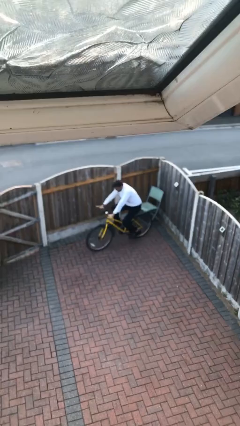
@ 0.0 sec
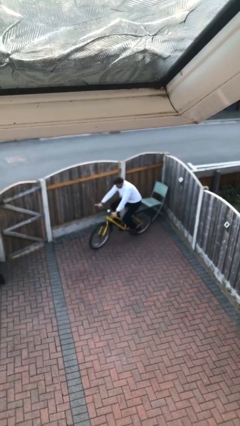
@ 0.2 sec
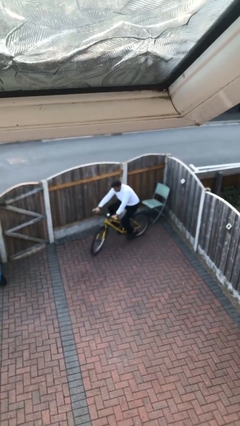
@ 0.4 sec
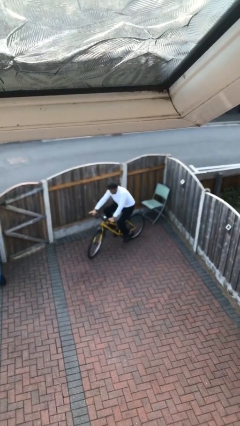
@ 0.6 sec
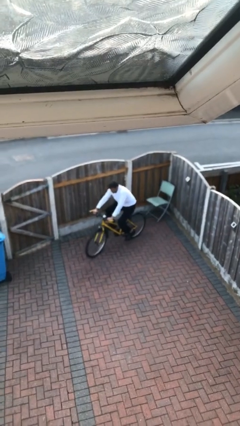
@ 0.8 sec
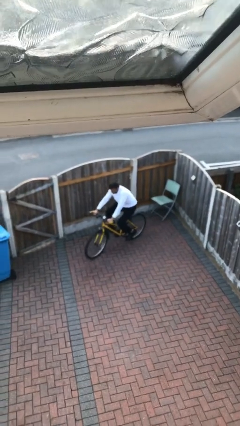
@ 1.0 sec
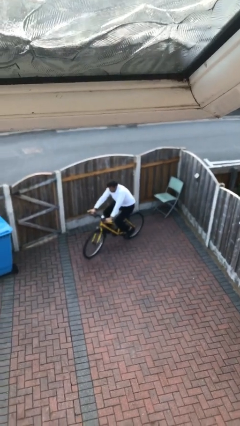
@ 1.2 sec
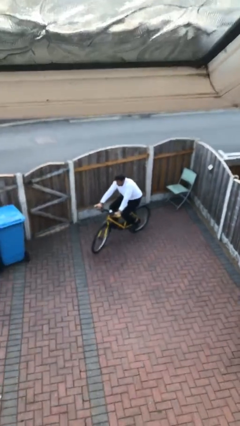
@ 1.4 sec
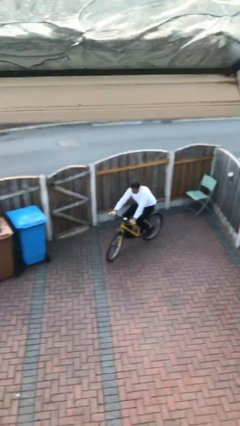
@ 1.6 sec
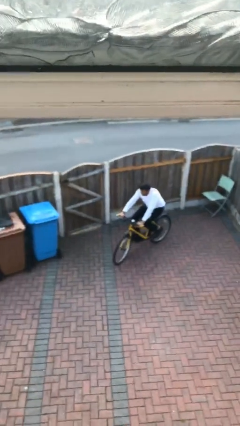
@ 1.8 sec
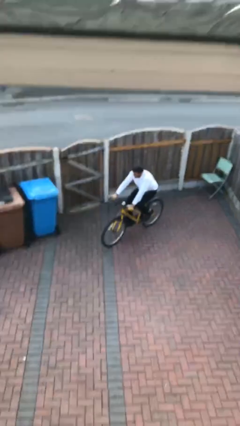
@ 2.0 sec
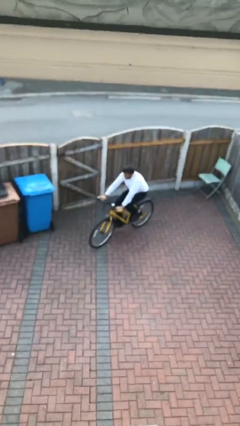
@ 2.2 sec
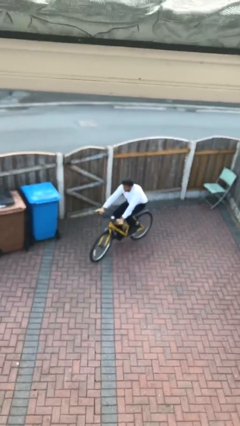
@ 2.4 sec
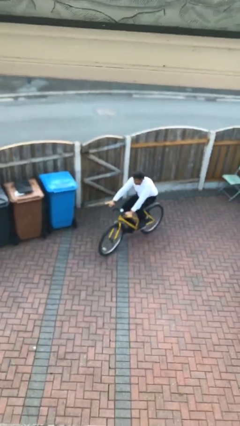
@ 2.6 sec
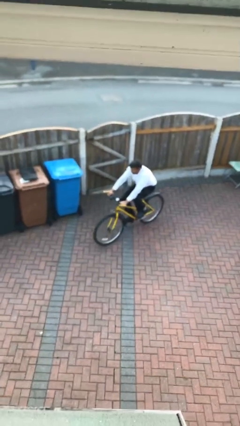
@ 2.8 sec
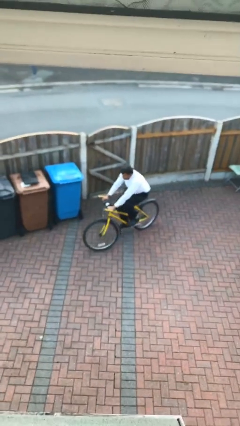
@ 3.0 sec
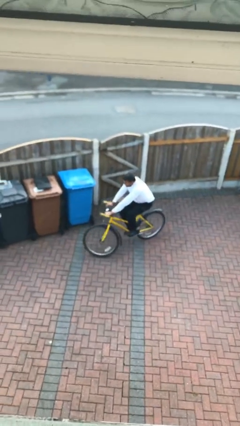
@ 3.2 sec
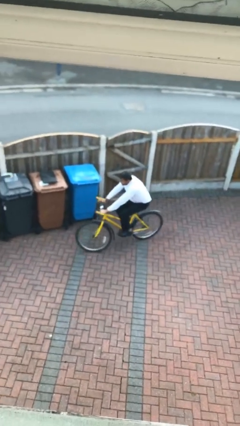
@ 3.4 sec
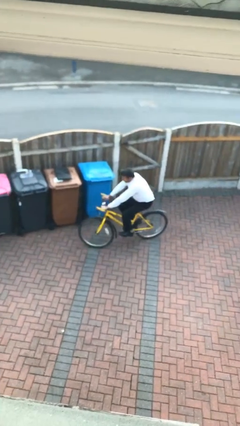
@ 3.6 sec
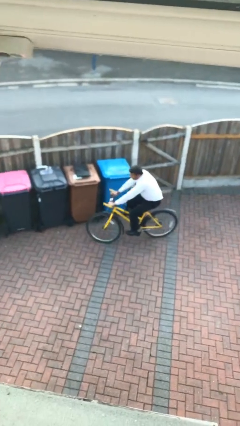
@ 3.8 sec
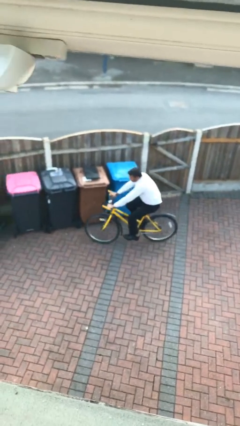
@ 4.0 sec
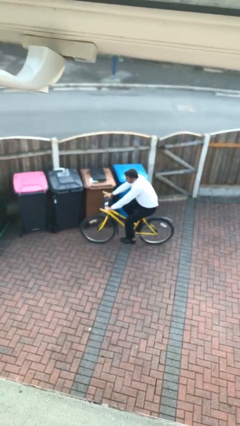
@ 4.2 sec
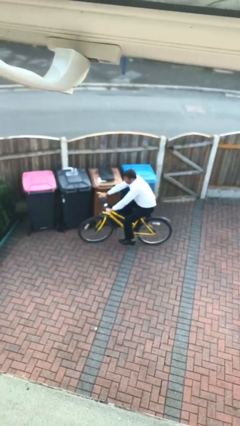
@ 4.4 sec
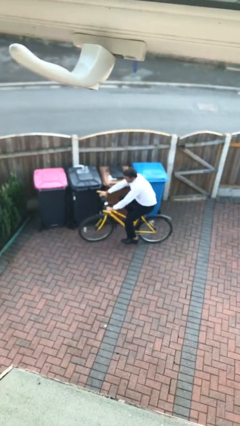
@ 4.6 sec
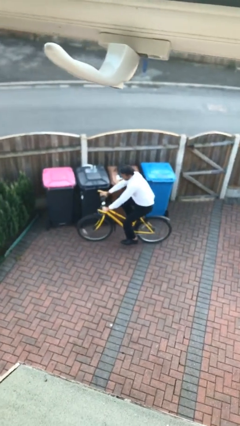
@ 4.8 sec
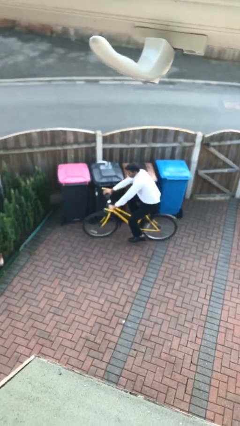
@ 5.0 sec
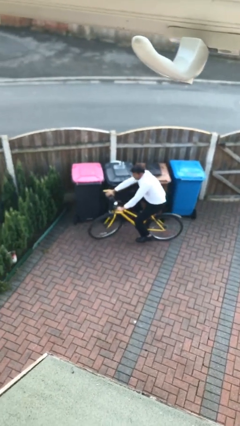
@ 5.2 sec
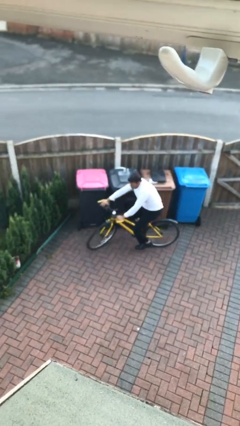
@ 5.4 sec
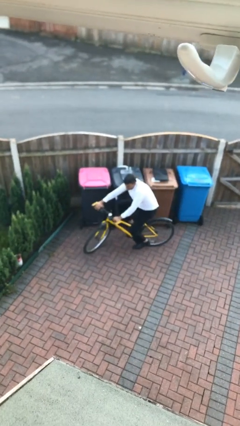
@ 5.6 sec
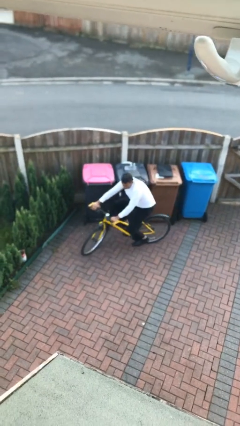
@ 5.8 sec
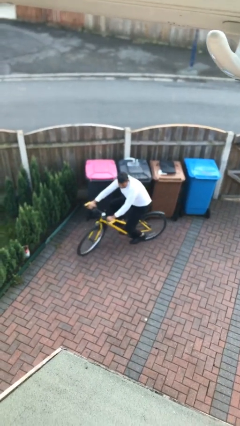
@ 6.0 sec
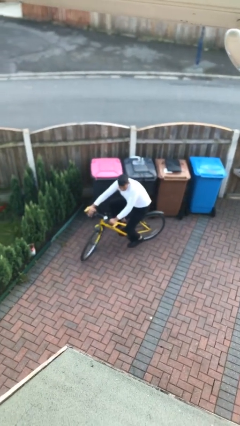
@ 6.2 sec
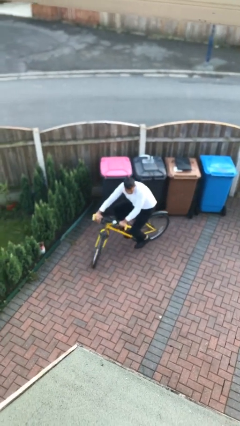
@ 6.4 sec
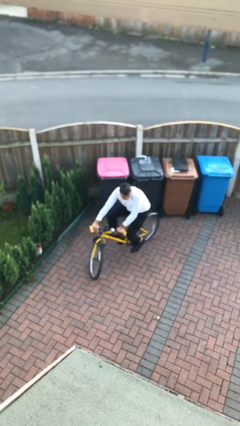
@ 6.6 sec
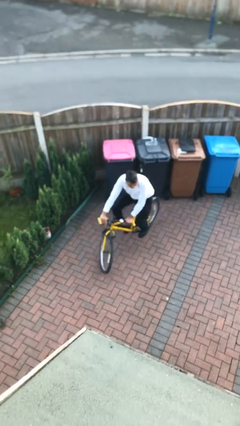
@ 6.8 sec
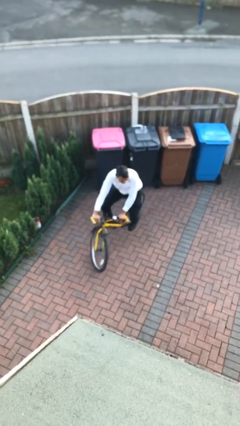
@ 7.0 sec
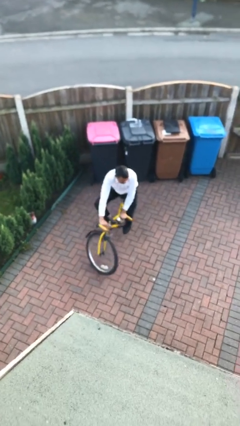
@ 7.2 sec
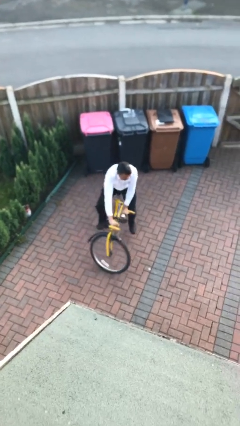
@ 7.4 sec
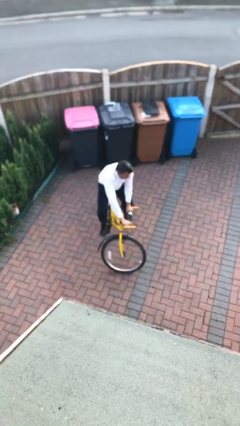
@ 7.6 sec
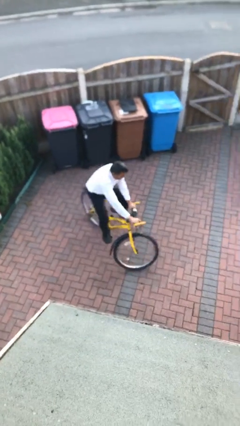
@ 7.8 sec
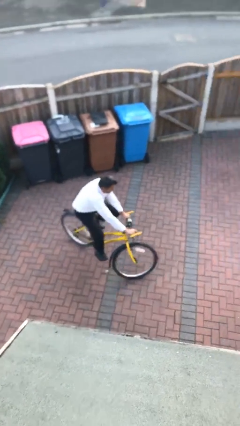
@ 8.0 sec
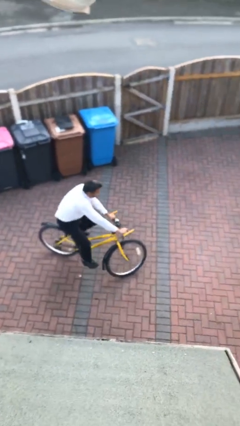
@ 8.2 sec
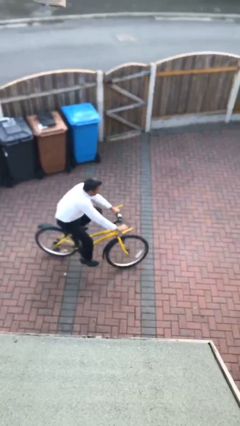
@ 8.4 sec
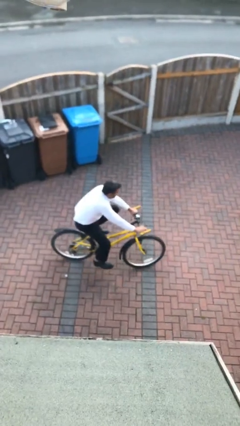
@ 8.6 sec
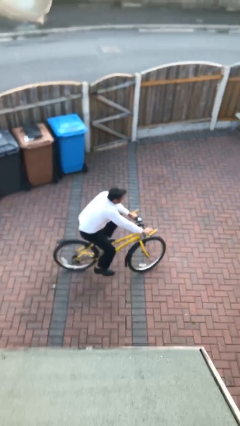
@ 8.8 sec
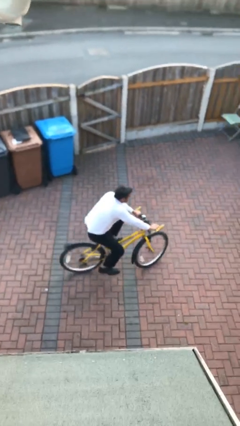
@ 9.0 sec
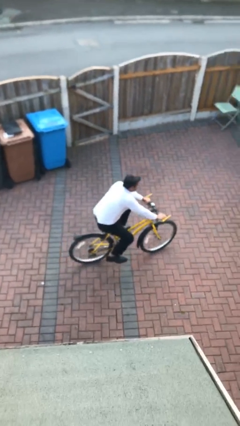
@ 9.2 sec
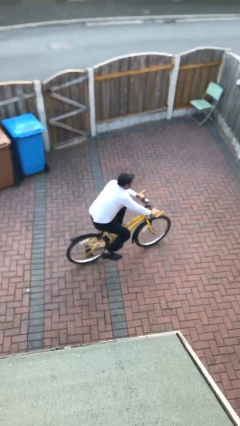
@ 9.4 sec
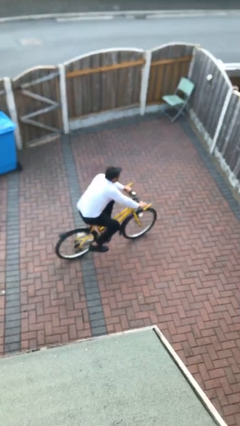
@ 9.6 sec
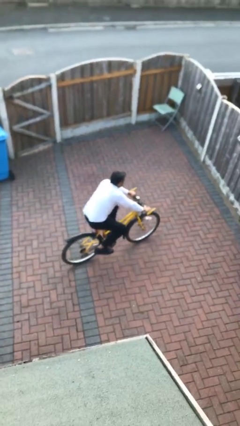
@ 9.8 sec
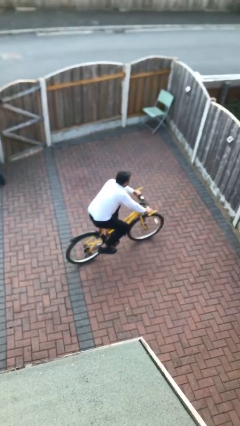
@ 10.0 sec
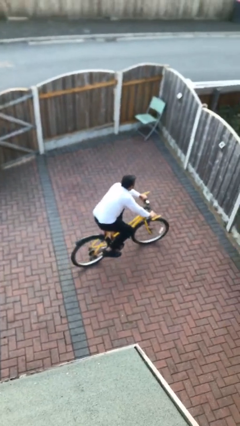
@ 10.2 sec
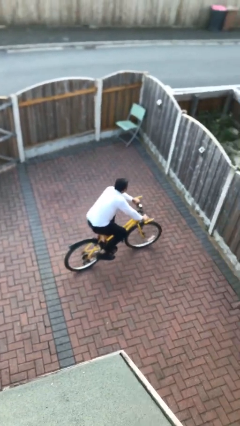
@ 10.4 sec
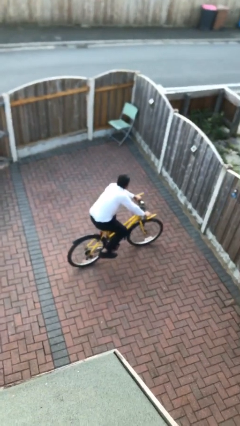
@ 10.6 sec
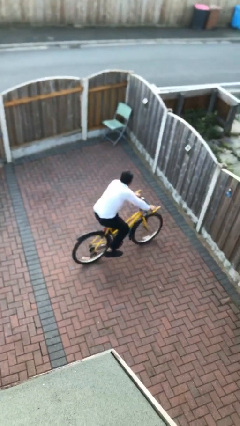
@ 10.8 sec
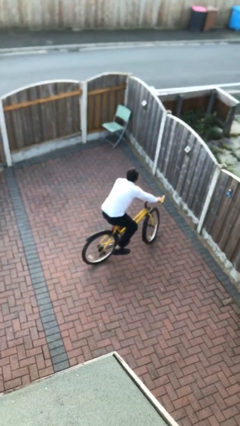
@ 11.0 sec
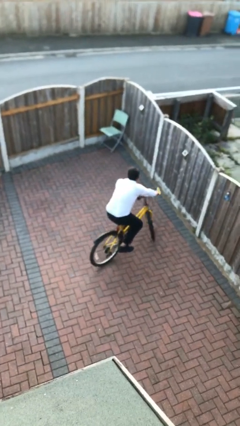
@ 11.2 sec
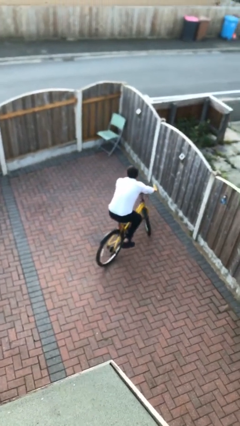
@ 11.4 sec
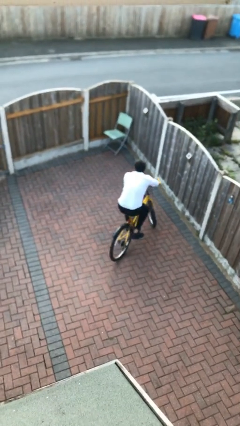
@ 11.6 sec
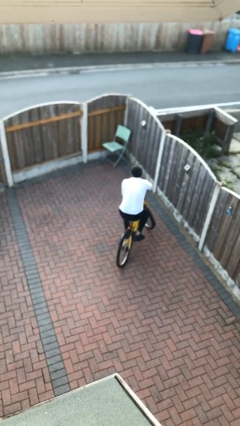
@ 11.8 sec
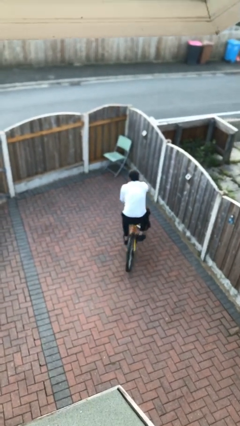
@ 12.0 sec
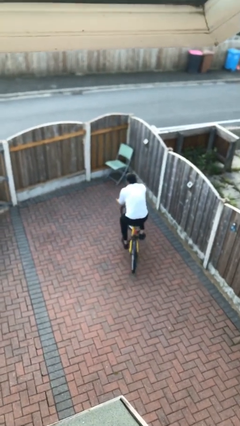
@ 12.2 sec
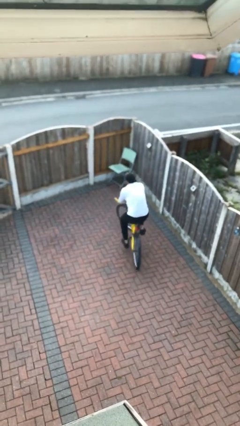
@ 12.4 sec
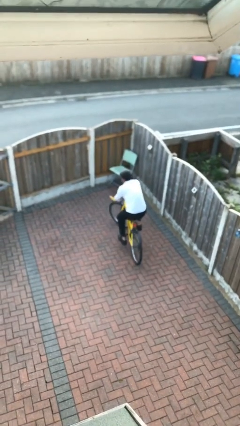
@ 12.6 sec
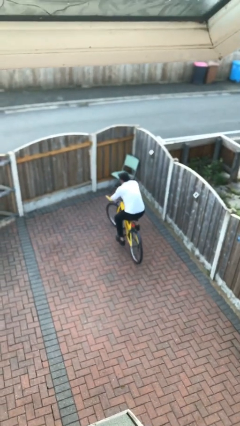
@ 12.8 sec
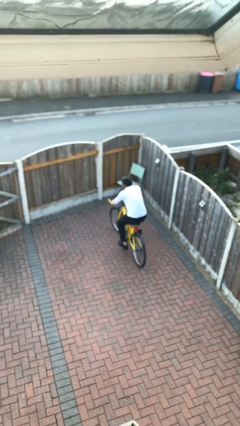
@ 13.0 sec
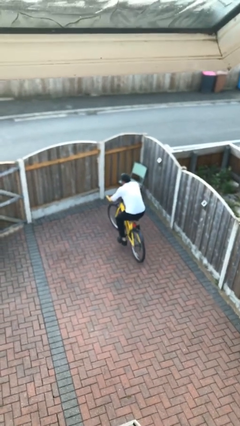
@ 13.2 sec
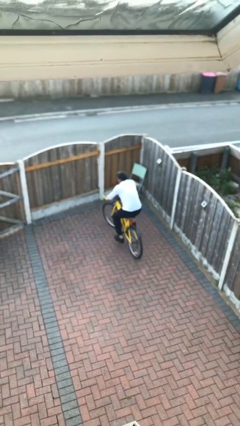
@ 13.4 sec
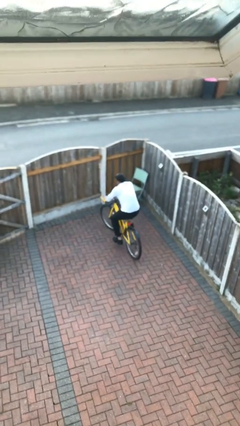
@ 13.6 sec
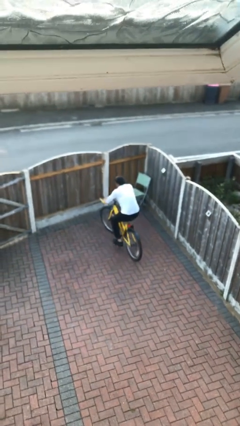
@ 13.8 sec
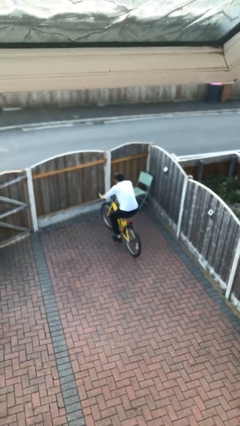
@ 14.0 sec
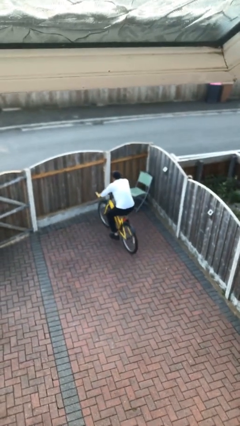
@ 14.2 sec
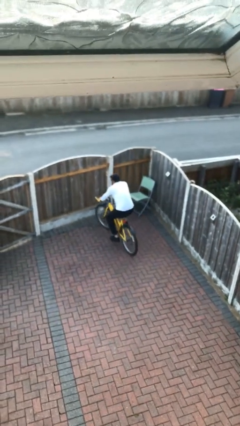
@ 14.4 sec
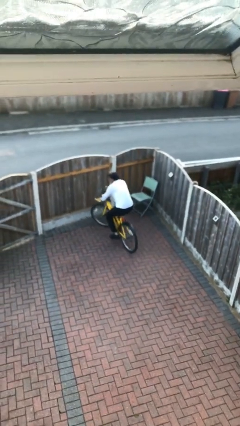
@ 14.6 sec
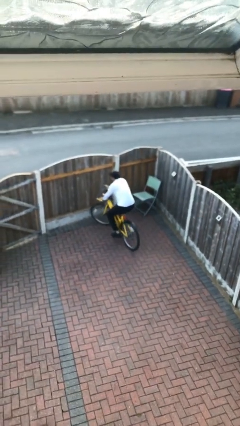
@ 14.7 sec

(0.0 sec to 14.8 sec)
person rides bicycle

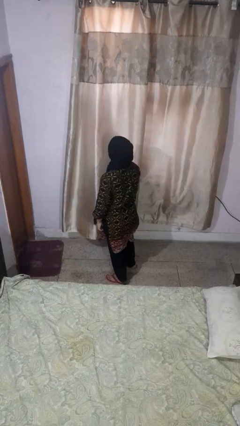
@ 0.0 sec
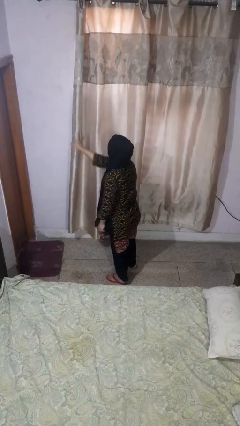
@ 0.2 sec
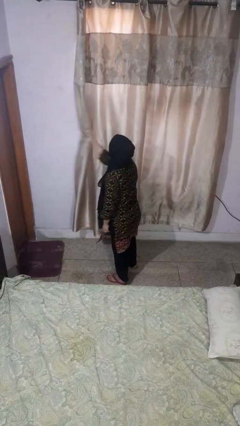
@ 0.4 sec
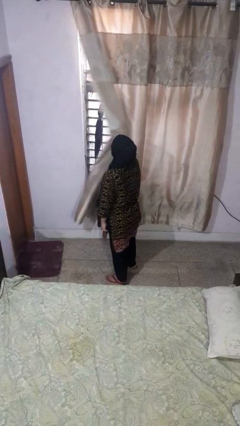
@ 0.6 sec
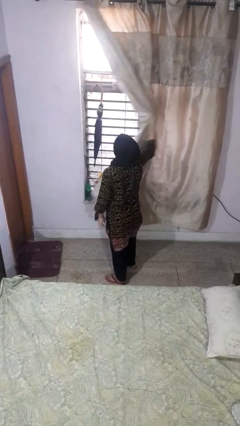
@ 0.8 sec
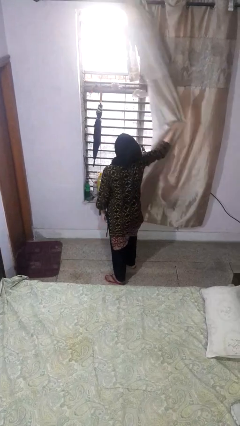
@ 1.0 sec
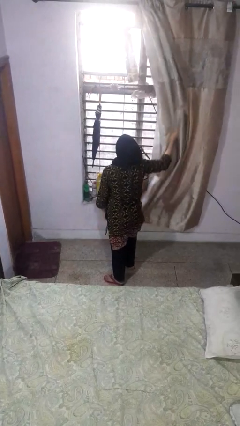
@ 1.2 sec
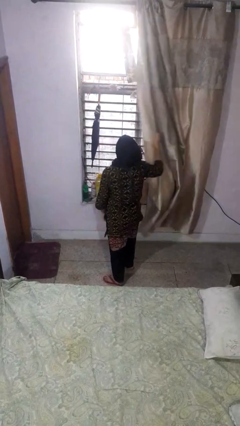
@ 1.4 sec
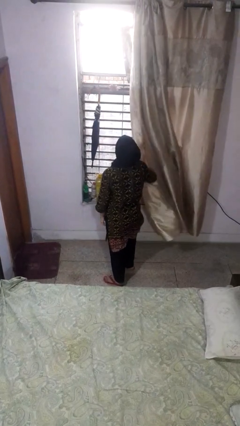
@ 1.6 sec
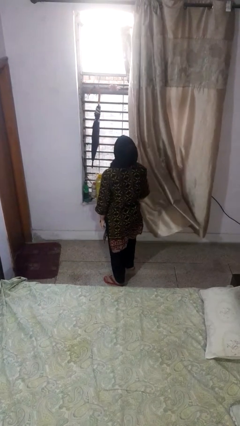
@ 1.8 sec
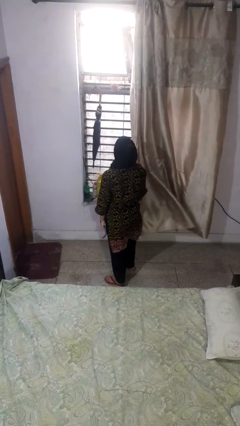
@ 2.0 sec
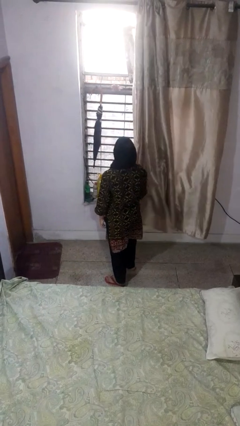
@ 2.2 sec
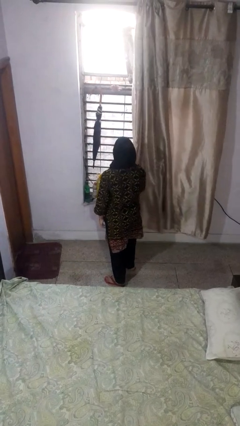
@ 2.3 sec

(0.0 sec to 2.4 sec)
person opens curtains

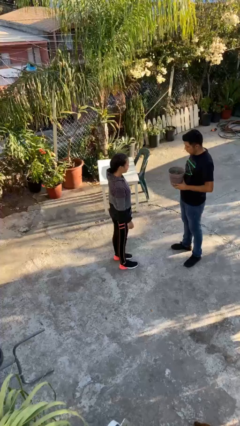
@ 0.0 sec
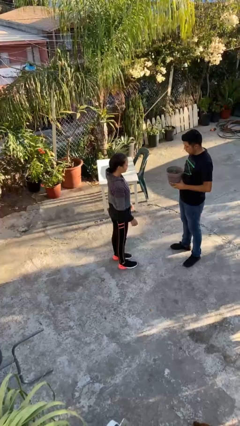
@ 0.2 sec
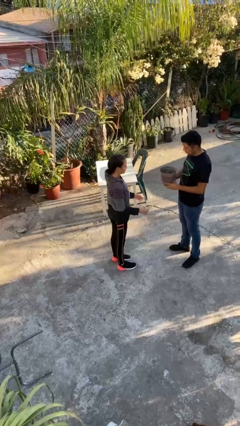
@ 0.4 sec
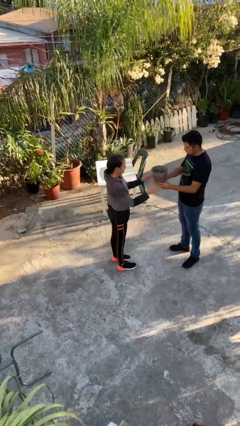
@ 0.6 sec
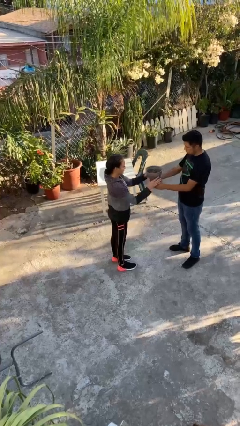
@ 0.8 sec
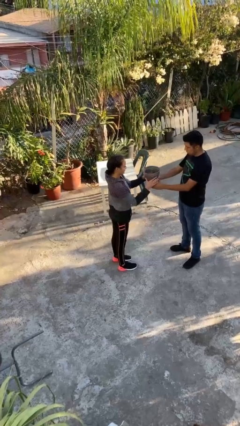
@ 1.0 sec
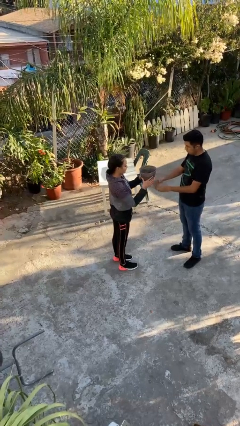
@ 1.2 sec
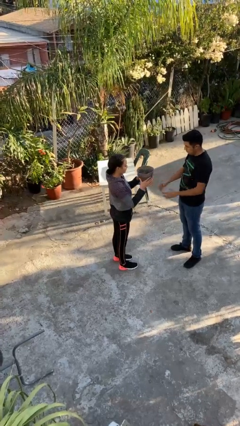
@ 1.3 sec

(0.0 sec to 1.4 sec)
person transfers object to person
